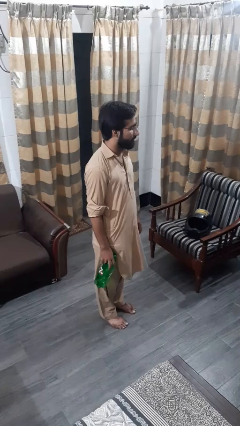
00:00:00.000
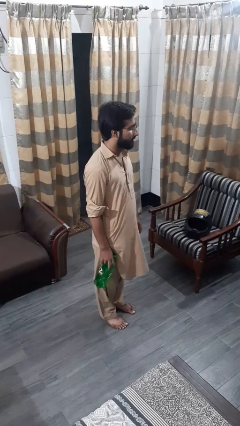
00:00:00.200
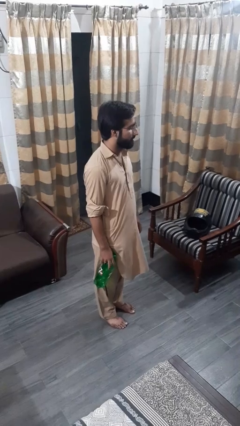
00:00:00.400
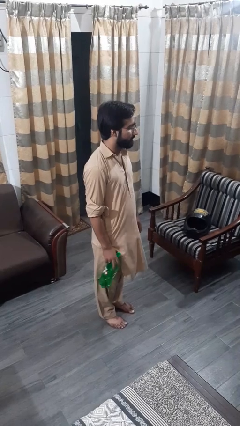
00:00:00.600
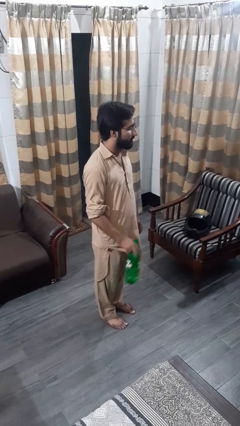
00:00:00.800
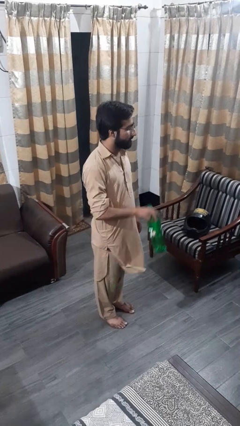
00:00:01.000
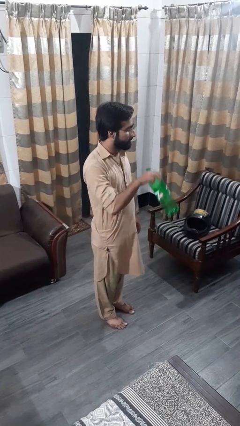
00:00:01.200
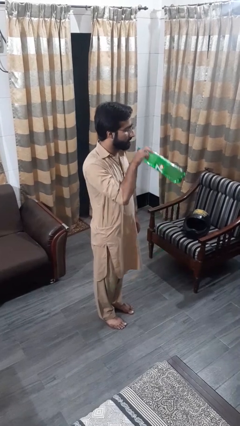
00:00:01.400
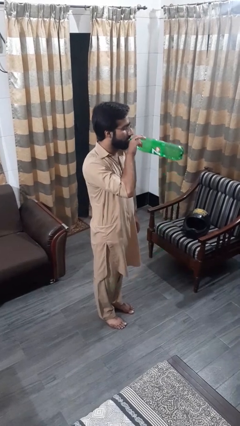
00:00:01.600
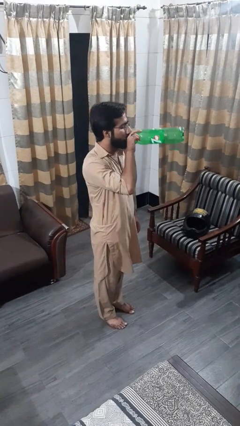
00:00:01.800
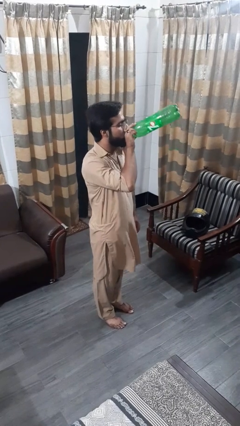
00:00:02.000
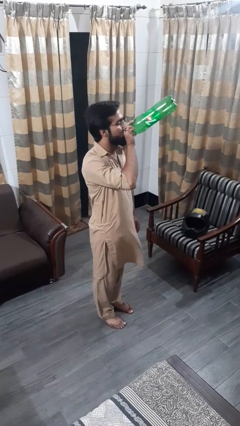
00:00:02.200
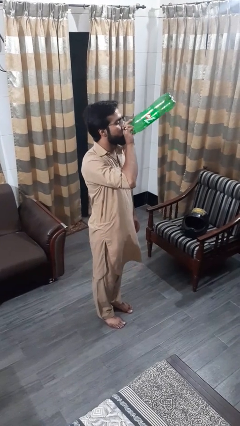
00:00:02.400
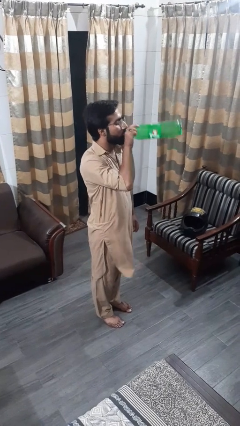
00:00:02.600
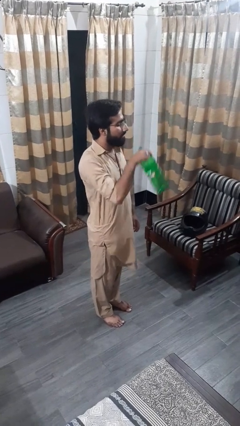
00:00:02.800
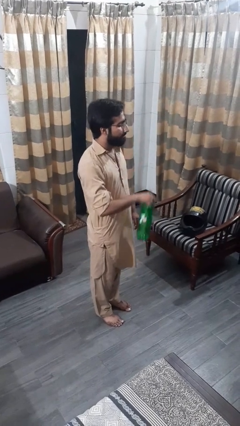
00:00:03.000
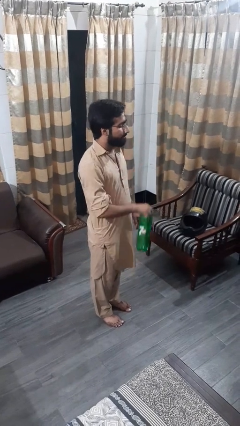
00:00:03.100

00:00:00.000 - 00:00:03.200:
person drinks from bottle

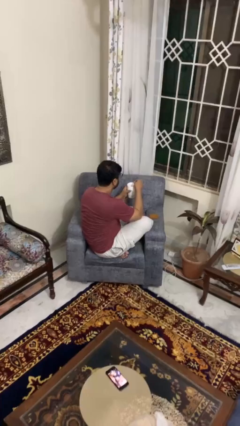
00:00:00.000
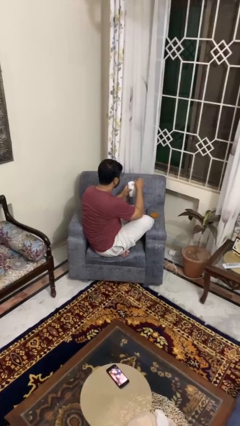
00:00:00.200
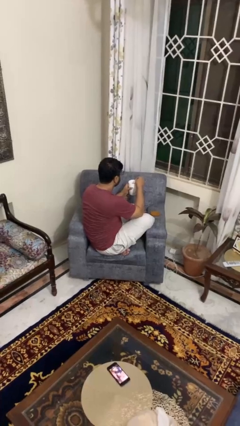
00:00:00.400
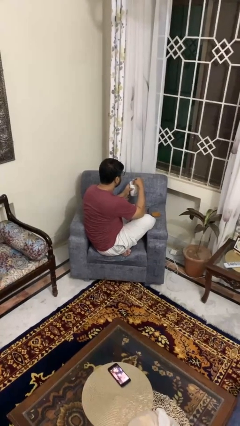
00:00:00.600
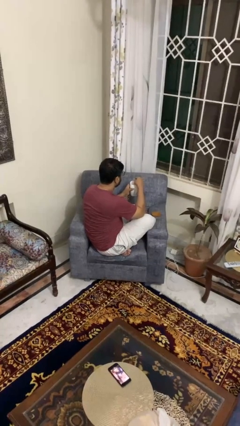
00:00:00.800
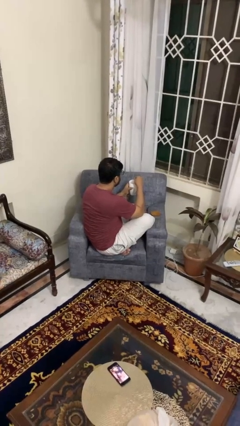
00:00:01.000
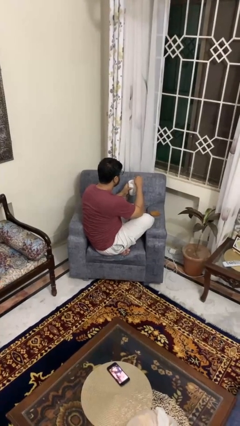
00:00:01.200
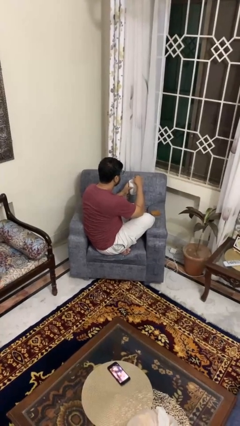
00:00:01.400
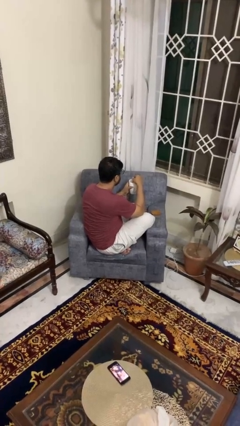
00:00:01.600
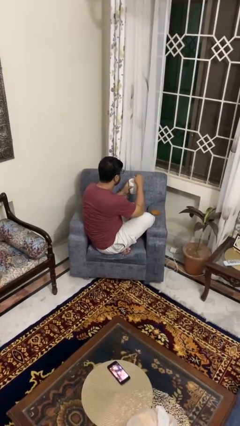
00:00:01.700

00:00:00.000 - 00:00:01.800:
person stirs mug

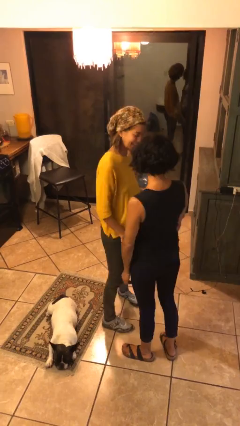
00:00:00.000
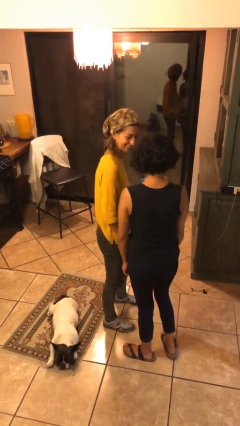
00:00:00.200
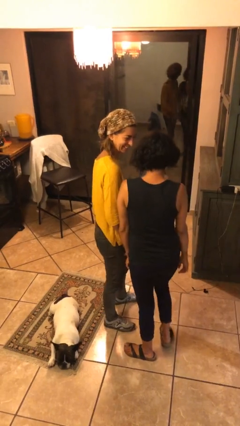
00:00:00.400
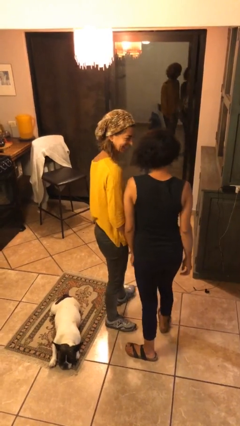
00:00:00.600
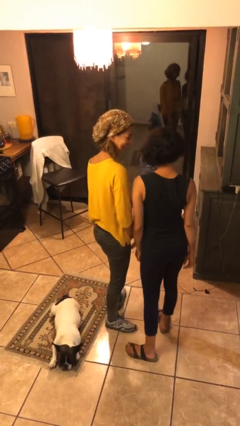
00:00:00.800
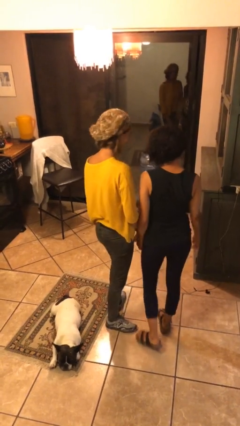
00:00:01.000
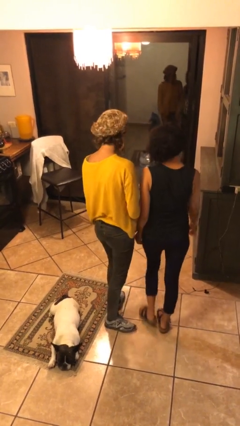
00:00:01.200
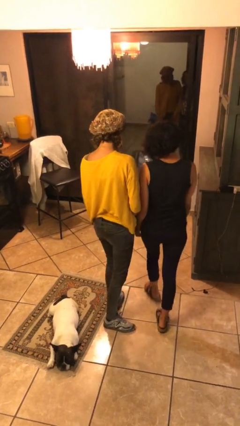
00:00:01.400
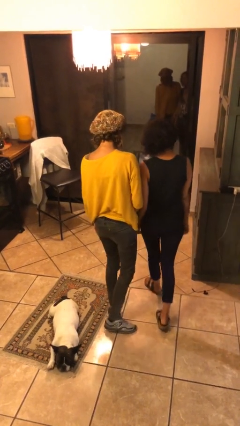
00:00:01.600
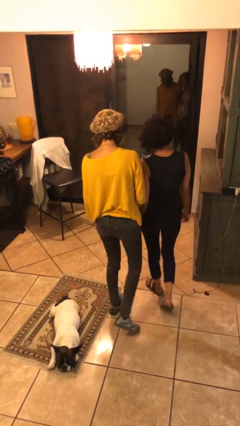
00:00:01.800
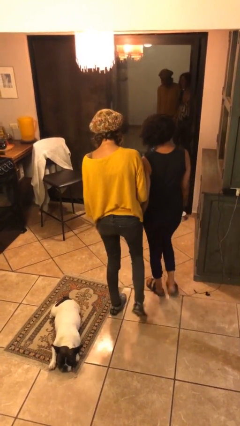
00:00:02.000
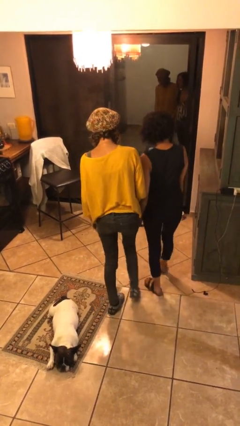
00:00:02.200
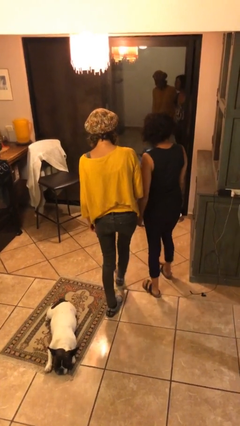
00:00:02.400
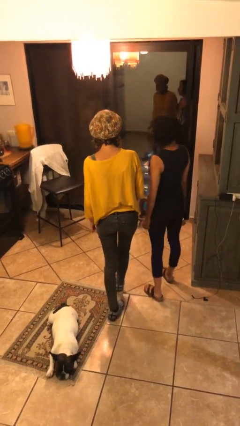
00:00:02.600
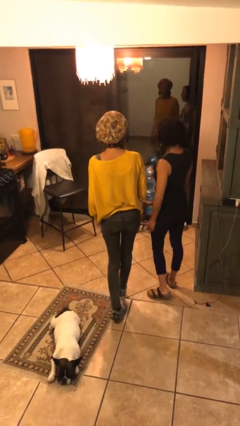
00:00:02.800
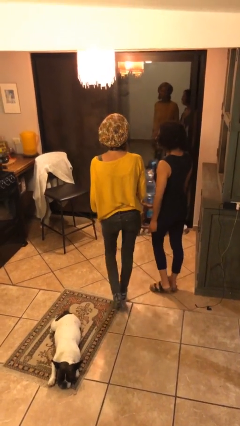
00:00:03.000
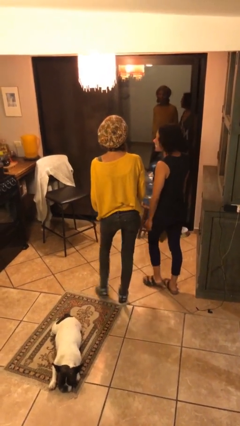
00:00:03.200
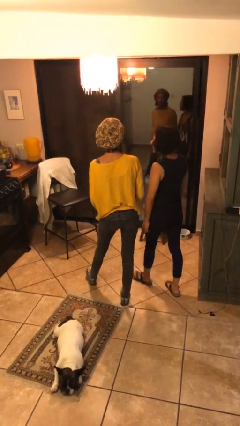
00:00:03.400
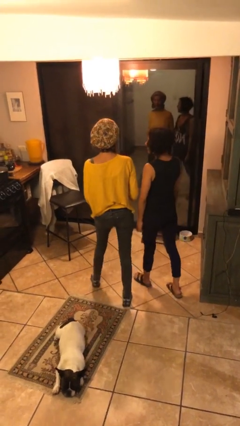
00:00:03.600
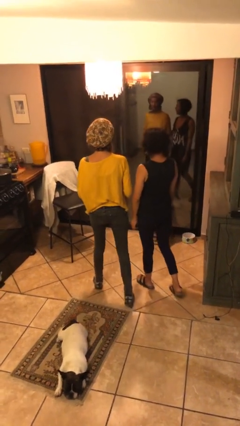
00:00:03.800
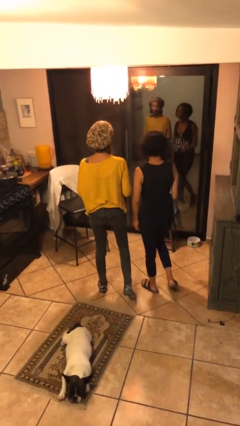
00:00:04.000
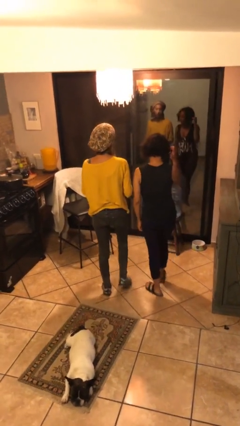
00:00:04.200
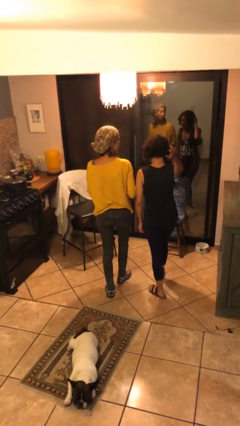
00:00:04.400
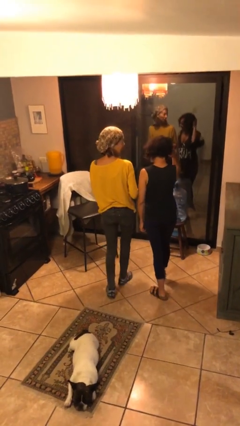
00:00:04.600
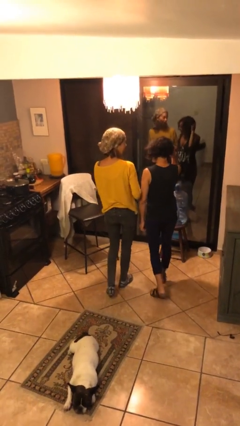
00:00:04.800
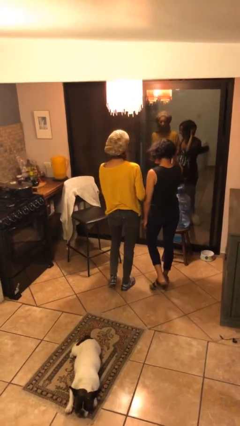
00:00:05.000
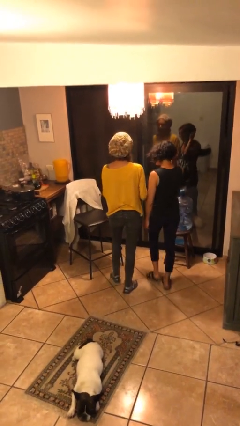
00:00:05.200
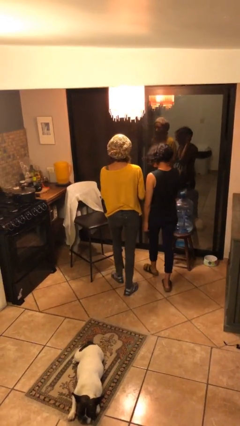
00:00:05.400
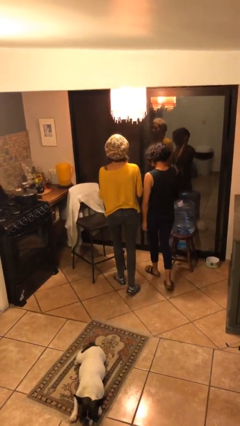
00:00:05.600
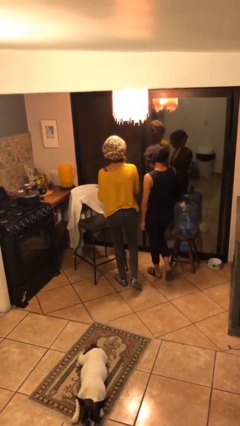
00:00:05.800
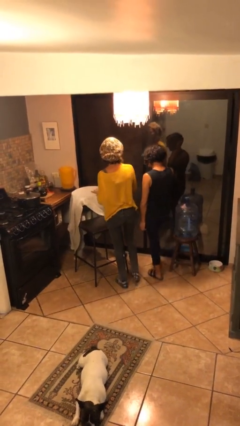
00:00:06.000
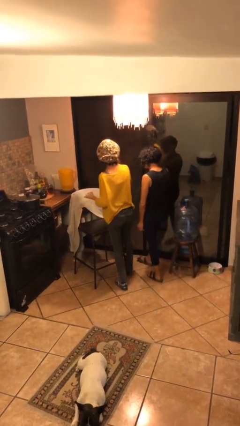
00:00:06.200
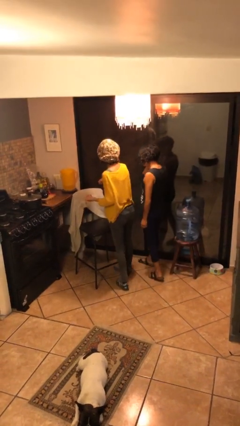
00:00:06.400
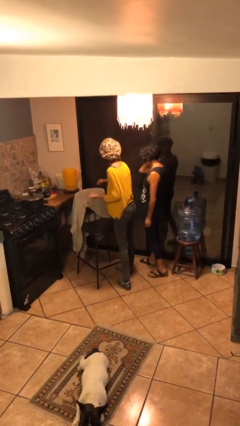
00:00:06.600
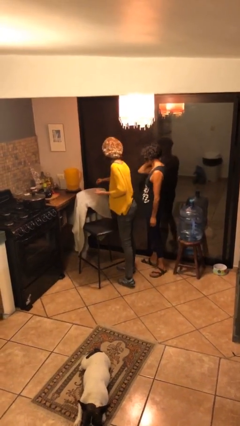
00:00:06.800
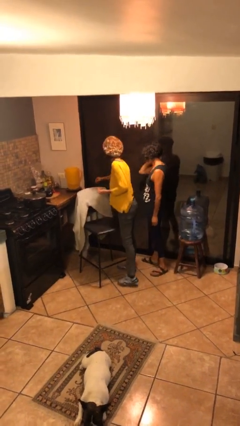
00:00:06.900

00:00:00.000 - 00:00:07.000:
person talks to person

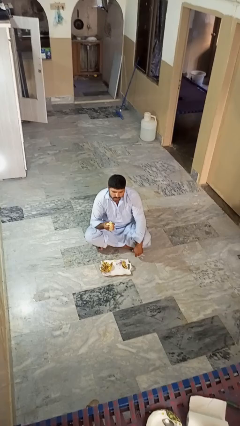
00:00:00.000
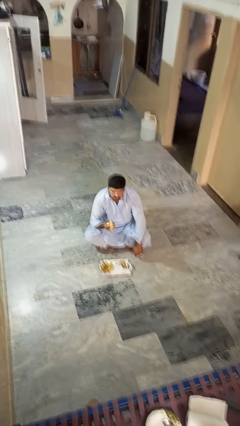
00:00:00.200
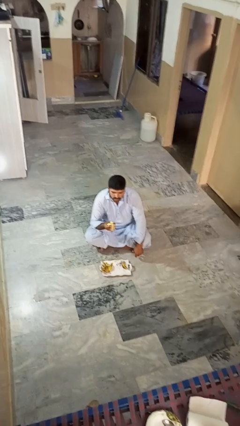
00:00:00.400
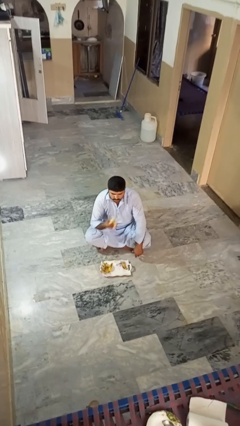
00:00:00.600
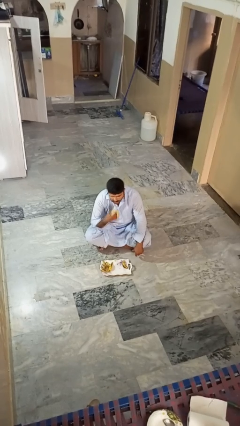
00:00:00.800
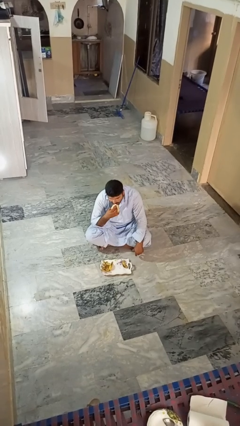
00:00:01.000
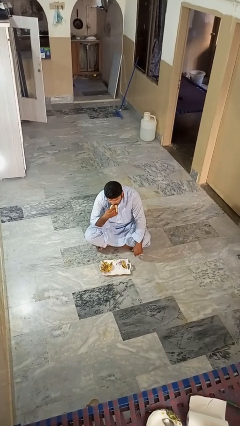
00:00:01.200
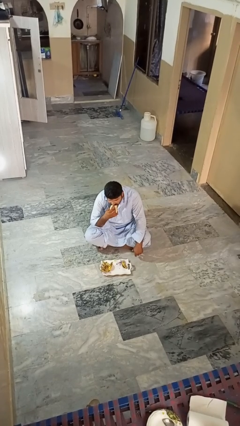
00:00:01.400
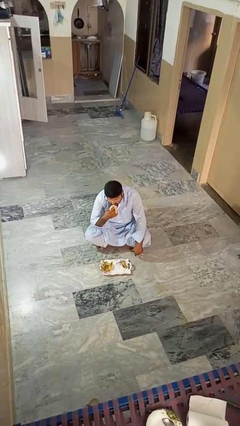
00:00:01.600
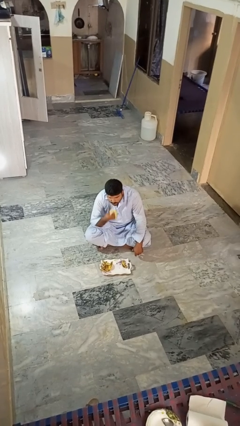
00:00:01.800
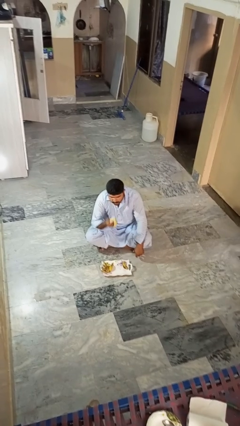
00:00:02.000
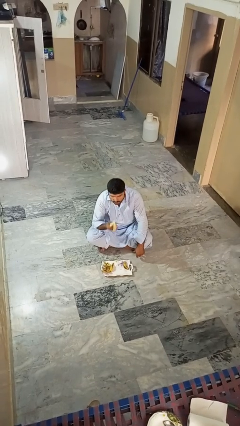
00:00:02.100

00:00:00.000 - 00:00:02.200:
person eats banana

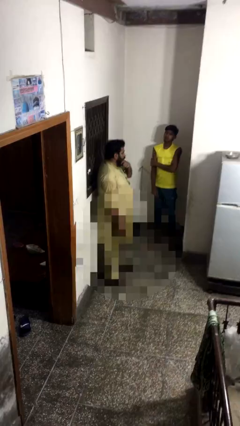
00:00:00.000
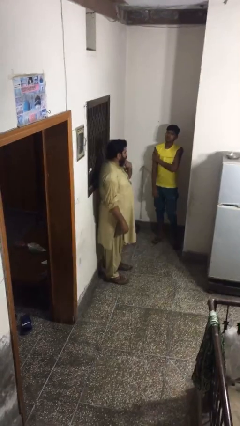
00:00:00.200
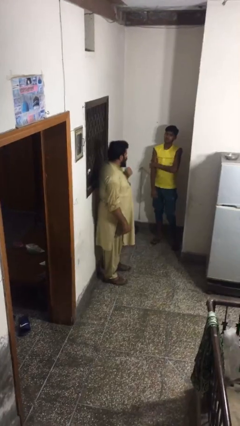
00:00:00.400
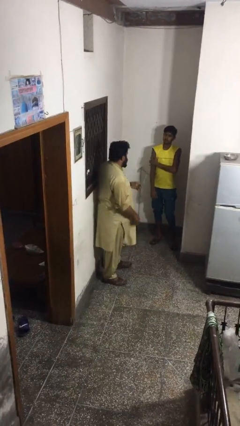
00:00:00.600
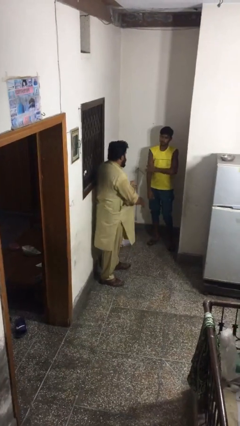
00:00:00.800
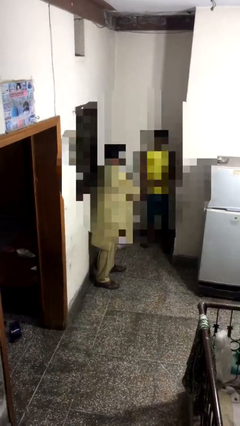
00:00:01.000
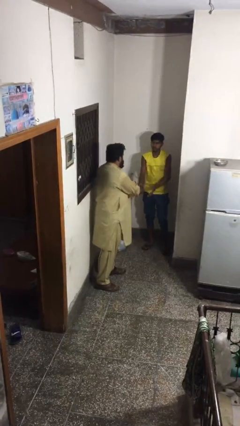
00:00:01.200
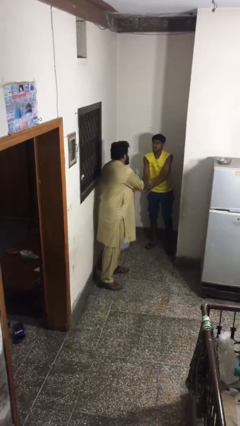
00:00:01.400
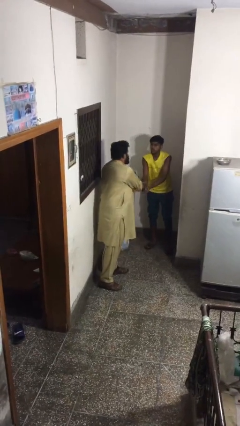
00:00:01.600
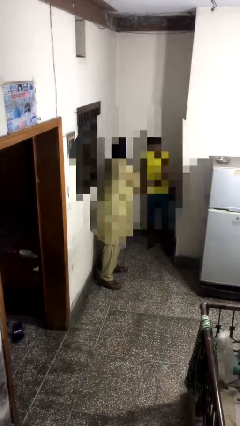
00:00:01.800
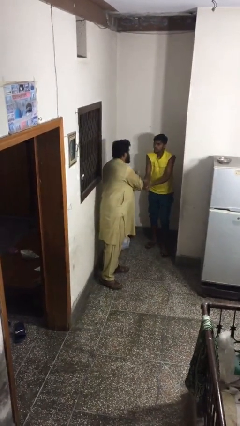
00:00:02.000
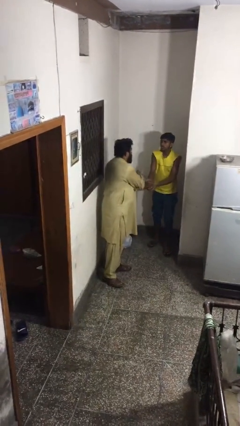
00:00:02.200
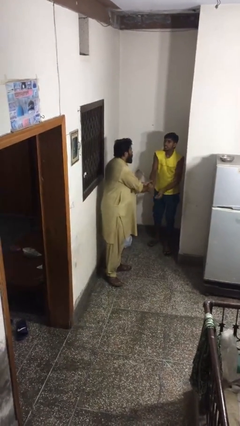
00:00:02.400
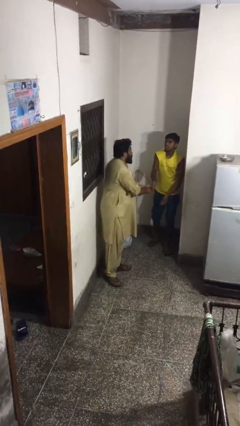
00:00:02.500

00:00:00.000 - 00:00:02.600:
person shakes hand
